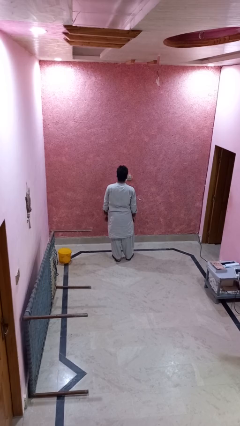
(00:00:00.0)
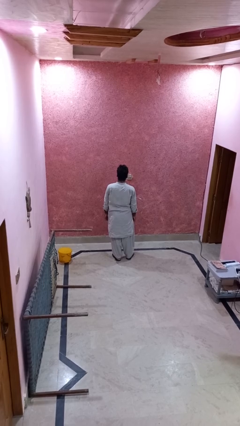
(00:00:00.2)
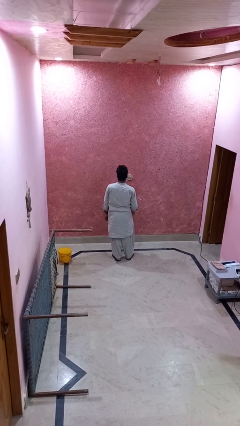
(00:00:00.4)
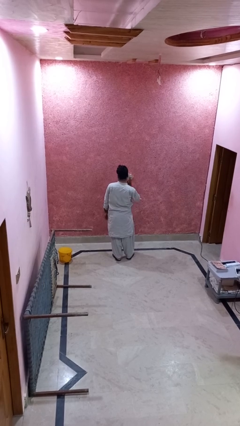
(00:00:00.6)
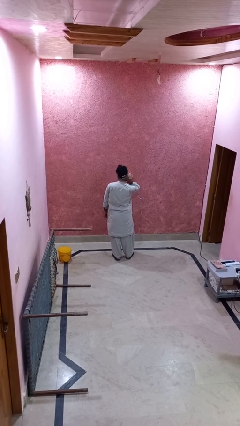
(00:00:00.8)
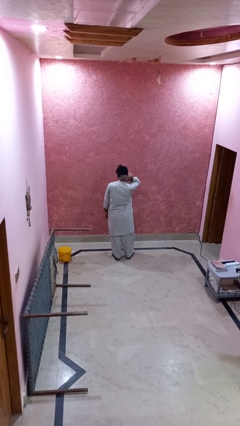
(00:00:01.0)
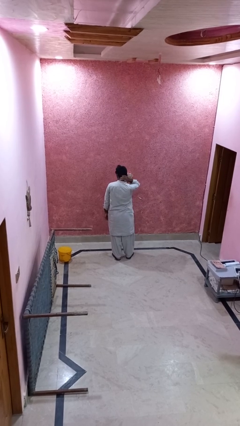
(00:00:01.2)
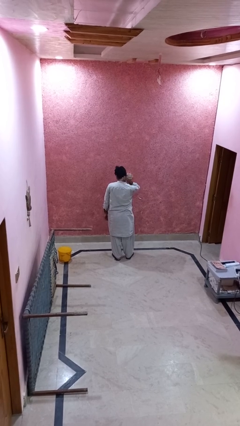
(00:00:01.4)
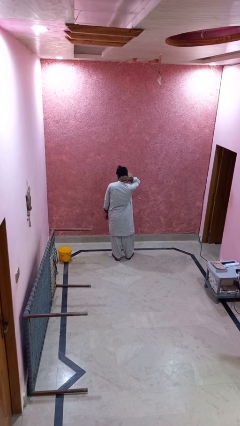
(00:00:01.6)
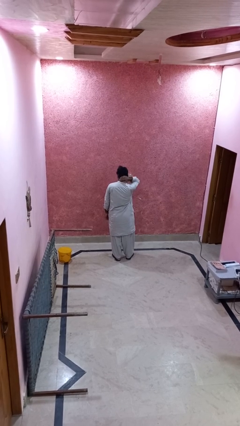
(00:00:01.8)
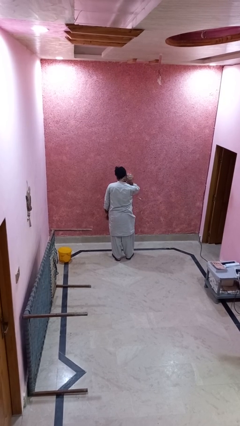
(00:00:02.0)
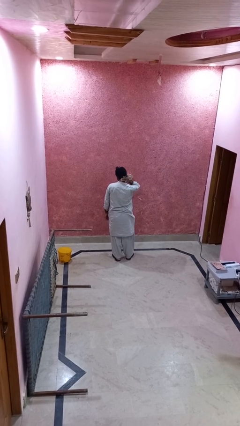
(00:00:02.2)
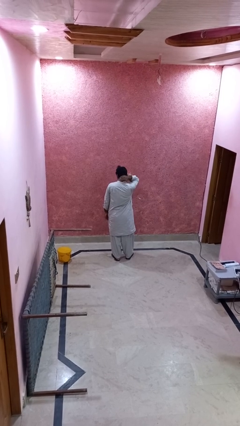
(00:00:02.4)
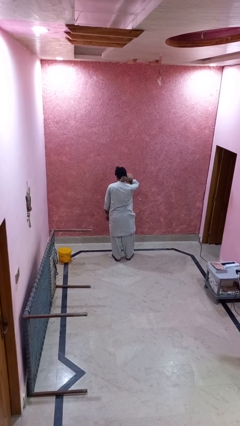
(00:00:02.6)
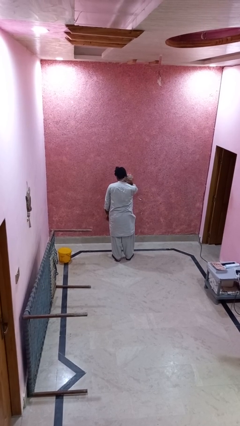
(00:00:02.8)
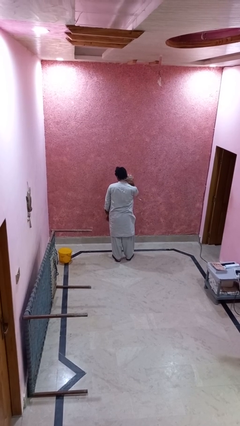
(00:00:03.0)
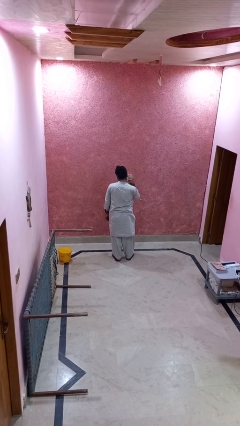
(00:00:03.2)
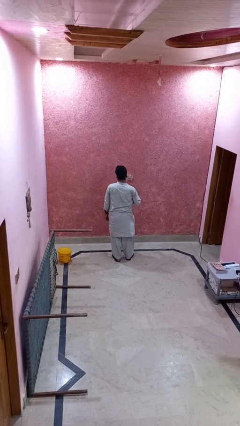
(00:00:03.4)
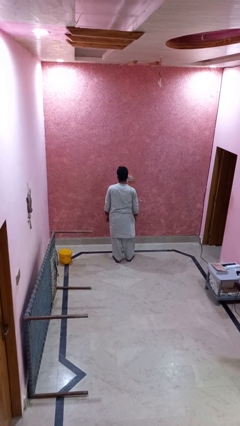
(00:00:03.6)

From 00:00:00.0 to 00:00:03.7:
person rubs neck

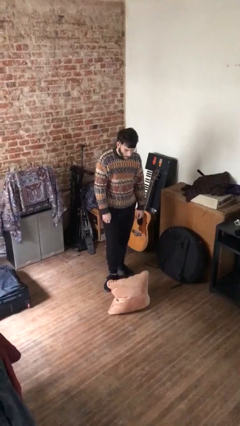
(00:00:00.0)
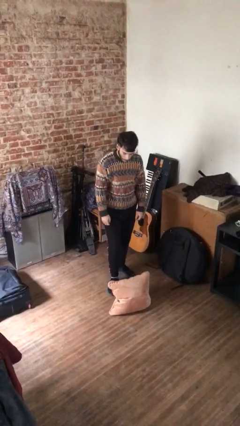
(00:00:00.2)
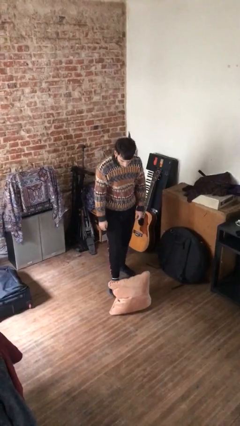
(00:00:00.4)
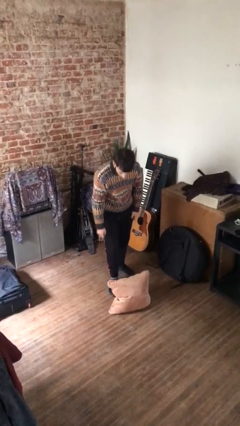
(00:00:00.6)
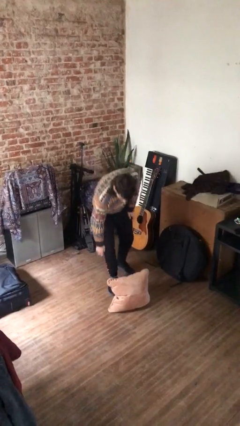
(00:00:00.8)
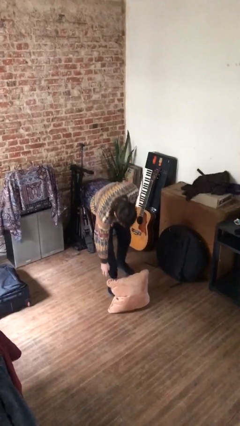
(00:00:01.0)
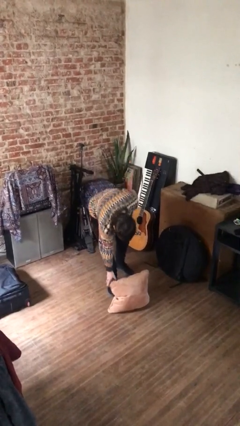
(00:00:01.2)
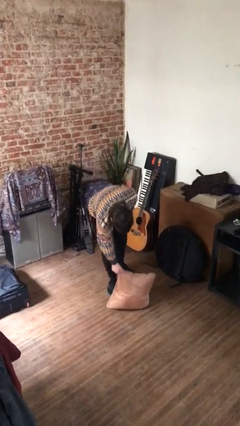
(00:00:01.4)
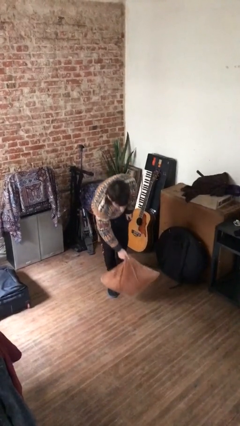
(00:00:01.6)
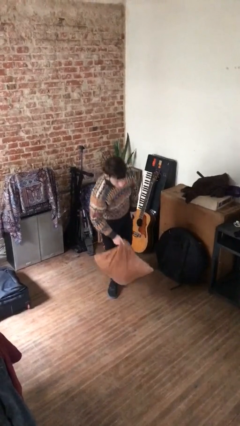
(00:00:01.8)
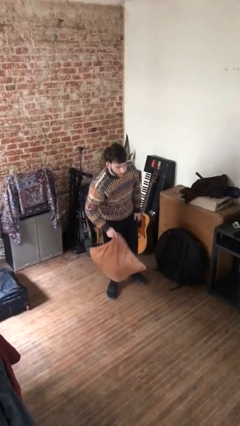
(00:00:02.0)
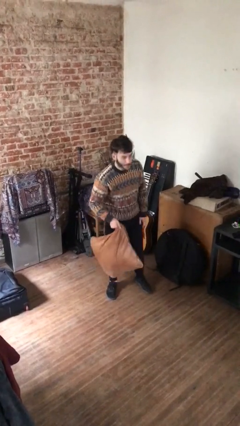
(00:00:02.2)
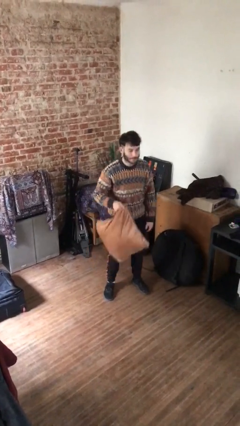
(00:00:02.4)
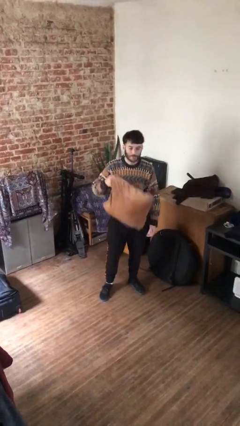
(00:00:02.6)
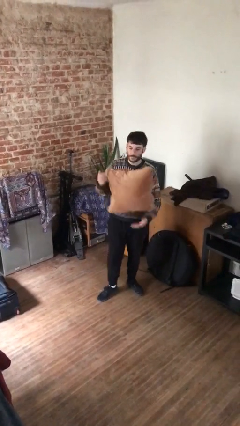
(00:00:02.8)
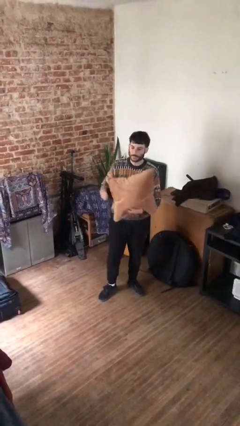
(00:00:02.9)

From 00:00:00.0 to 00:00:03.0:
person picks up object from floor

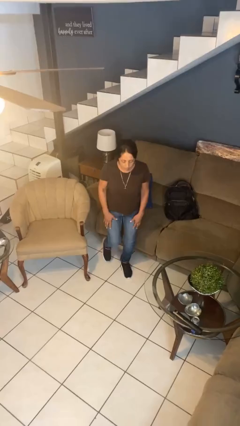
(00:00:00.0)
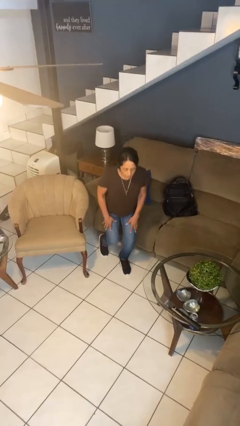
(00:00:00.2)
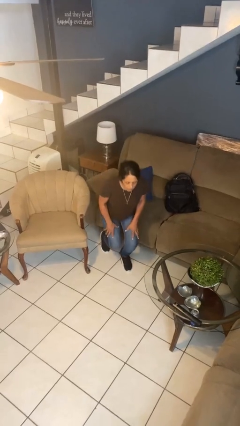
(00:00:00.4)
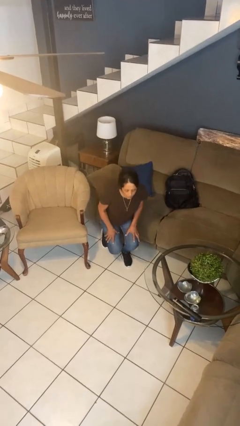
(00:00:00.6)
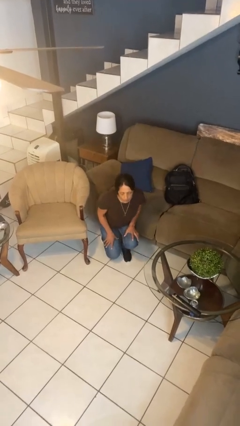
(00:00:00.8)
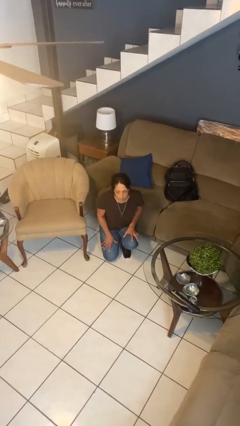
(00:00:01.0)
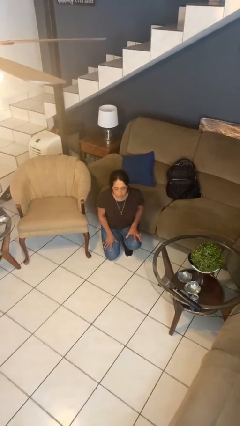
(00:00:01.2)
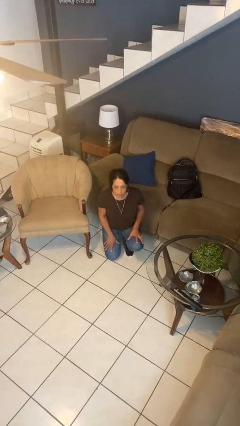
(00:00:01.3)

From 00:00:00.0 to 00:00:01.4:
person kneels

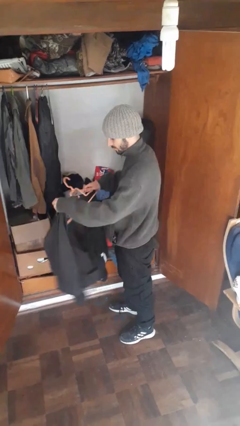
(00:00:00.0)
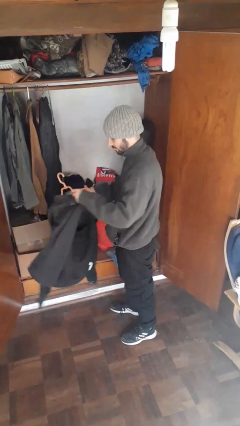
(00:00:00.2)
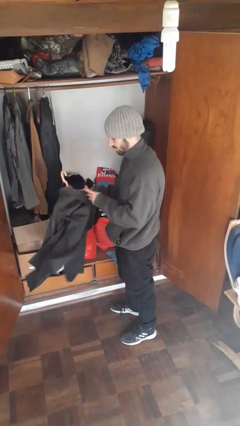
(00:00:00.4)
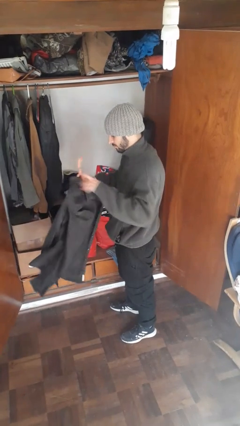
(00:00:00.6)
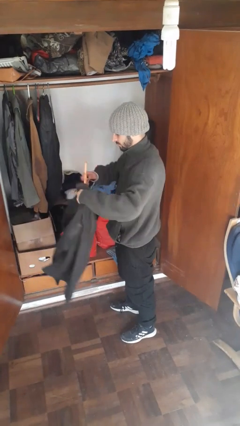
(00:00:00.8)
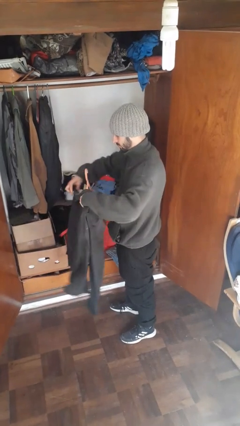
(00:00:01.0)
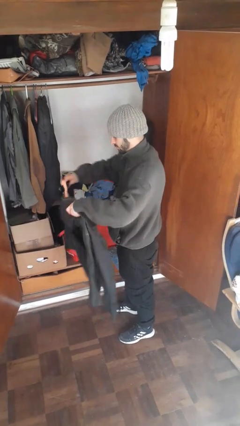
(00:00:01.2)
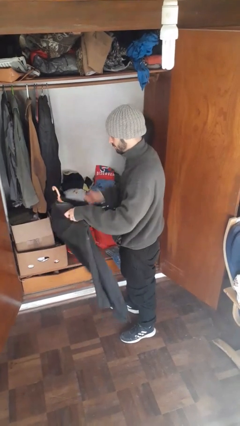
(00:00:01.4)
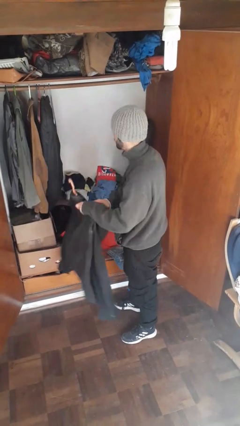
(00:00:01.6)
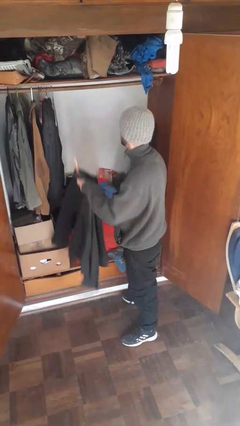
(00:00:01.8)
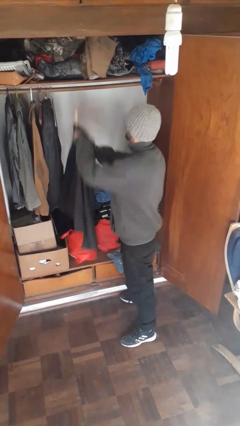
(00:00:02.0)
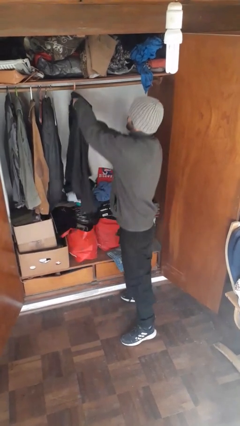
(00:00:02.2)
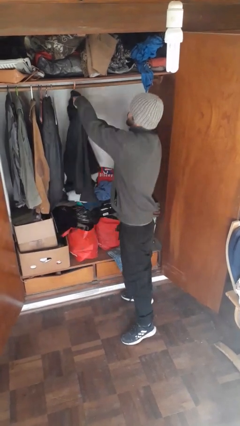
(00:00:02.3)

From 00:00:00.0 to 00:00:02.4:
person puts clothes into closet

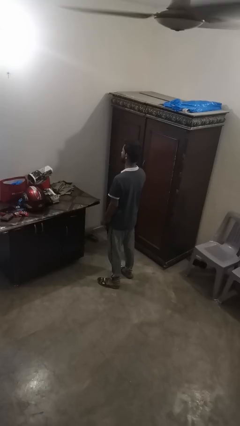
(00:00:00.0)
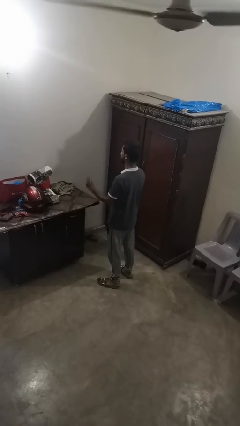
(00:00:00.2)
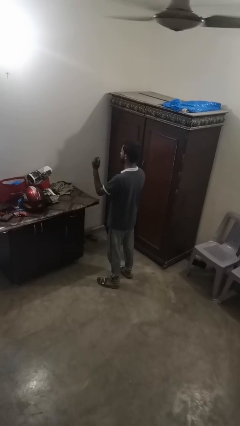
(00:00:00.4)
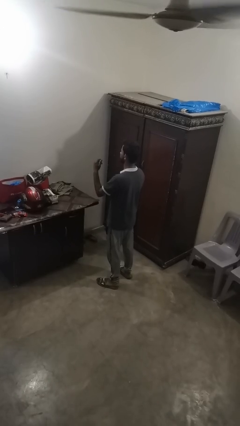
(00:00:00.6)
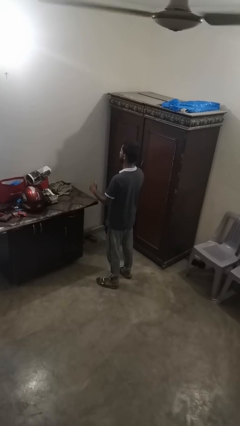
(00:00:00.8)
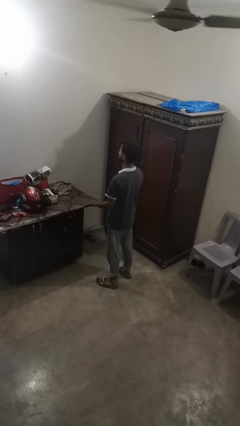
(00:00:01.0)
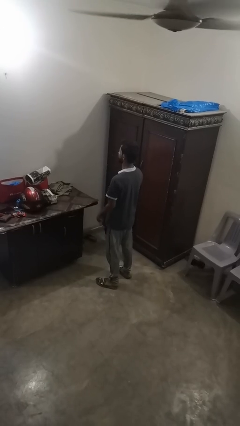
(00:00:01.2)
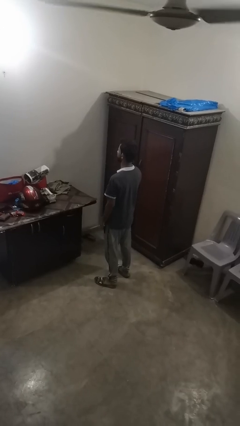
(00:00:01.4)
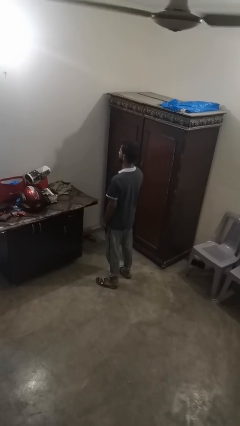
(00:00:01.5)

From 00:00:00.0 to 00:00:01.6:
person snaps fingers

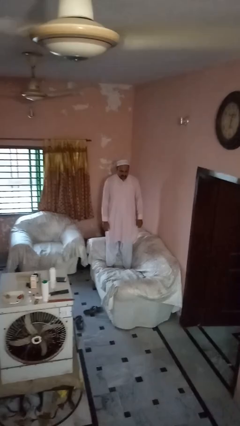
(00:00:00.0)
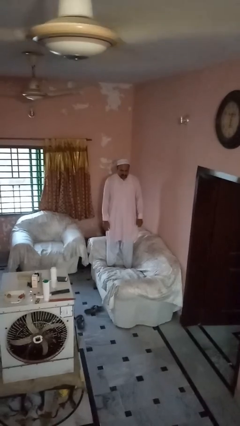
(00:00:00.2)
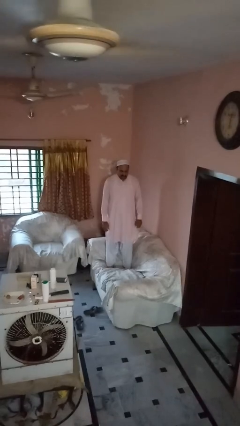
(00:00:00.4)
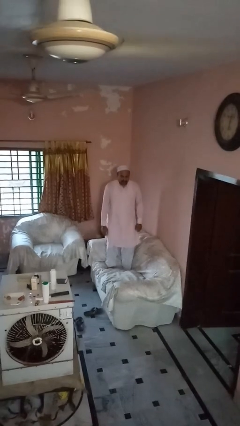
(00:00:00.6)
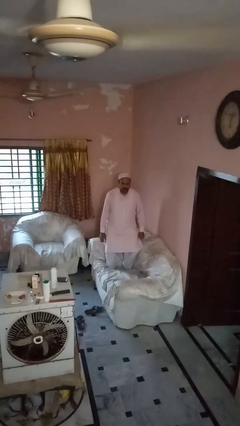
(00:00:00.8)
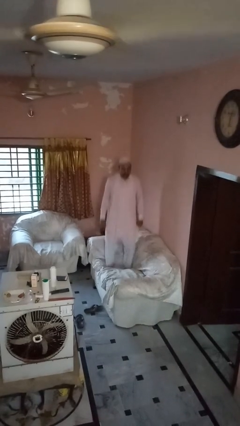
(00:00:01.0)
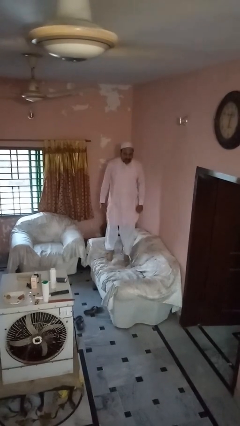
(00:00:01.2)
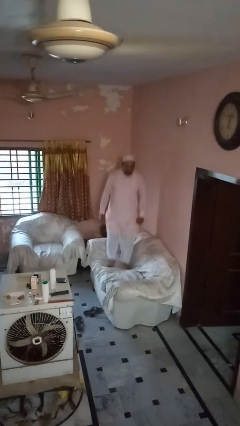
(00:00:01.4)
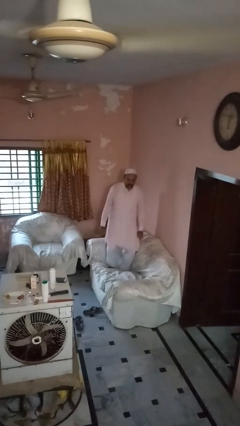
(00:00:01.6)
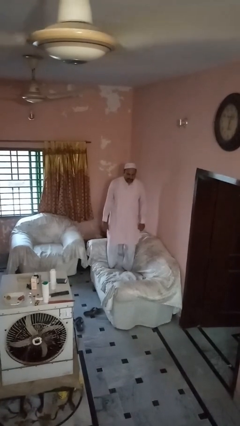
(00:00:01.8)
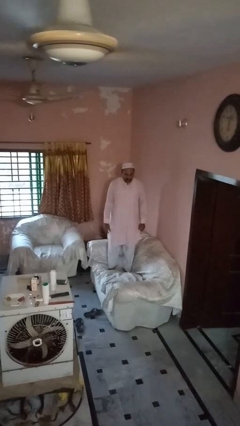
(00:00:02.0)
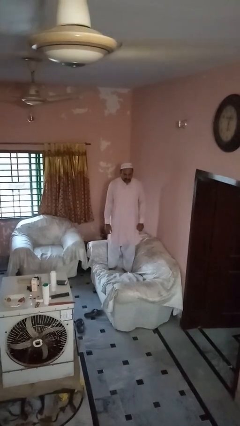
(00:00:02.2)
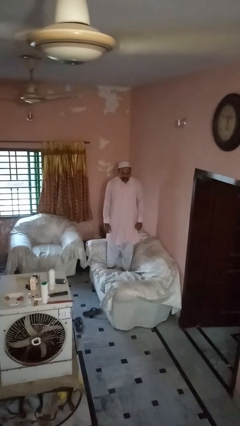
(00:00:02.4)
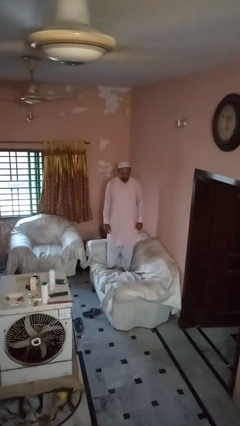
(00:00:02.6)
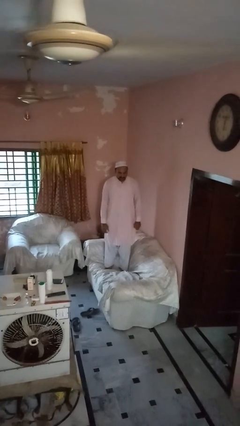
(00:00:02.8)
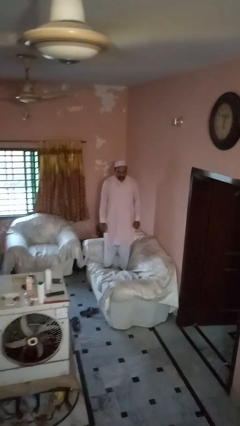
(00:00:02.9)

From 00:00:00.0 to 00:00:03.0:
person jumps on couch

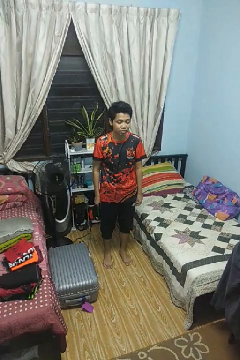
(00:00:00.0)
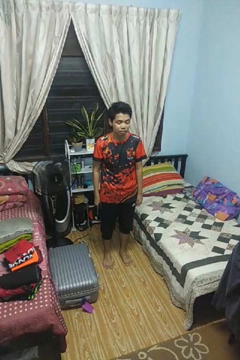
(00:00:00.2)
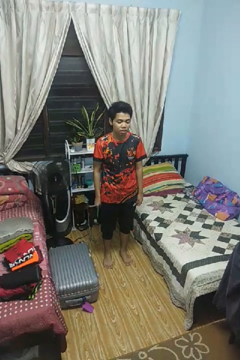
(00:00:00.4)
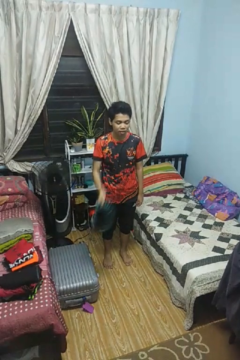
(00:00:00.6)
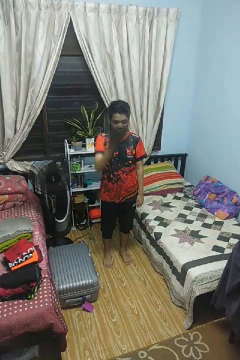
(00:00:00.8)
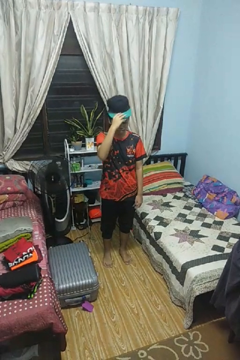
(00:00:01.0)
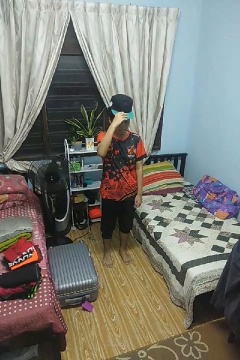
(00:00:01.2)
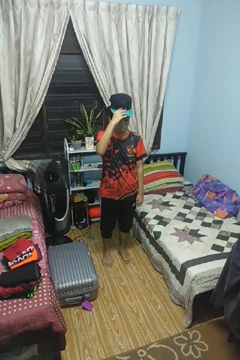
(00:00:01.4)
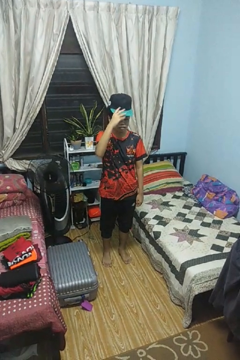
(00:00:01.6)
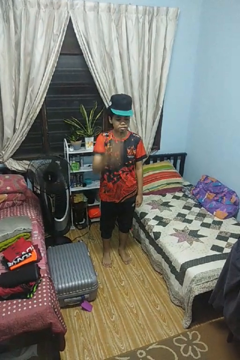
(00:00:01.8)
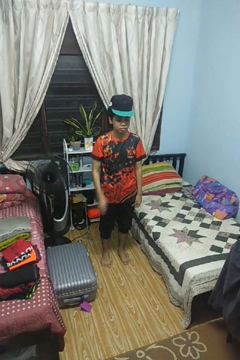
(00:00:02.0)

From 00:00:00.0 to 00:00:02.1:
person puts on hat
